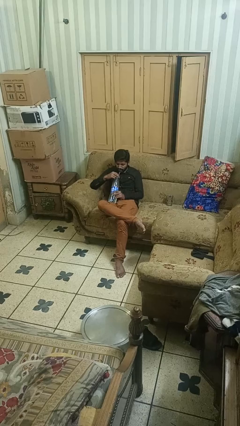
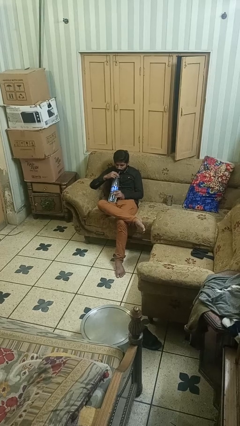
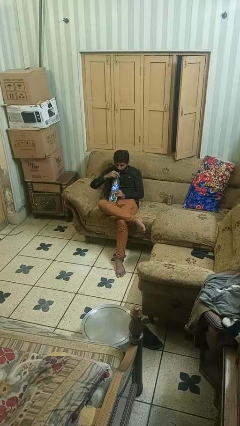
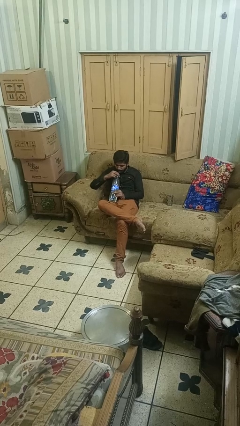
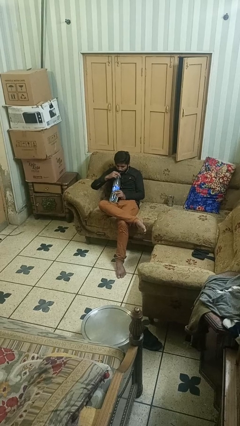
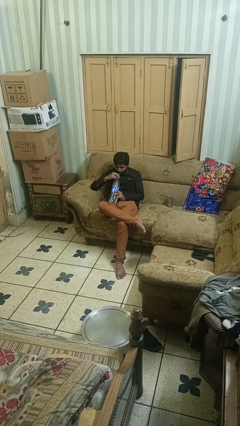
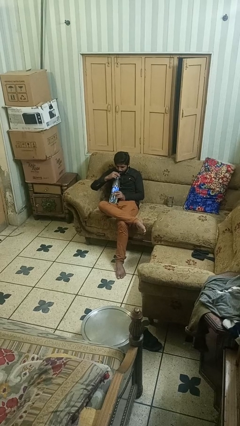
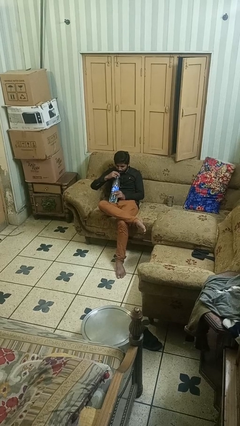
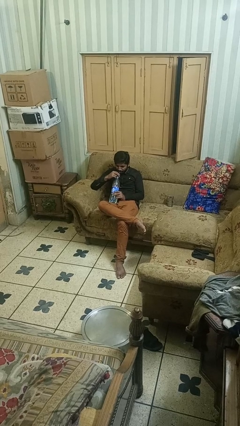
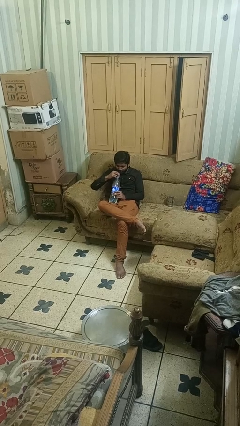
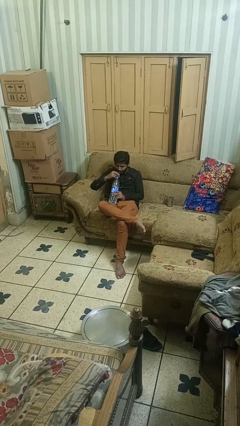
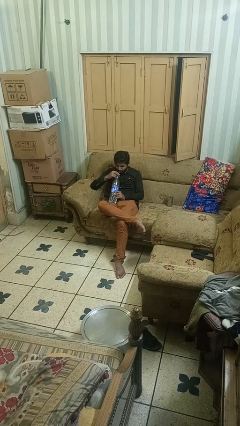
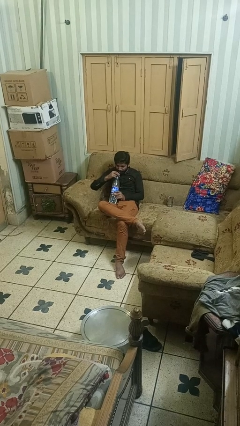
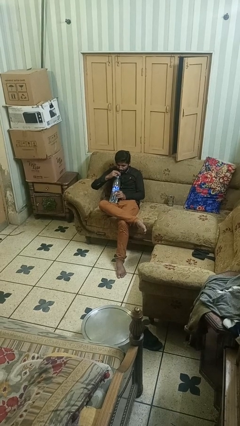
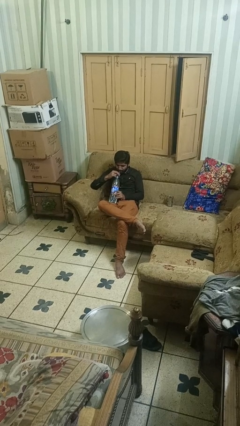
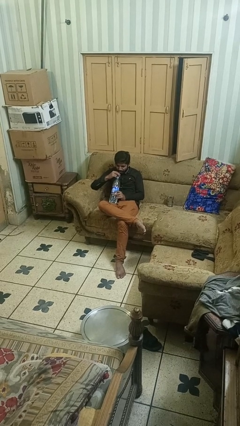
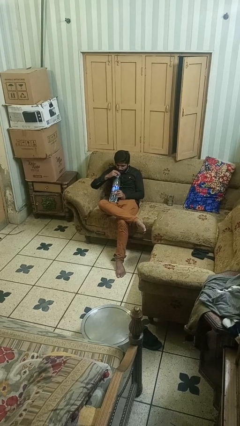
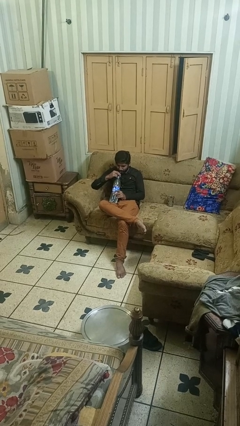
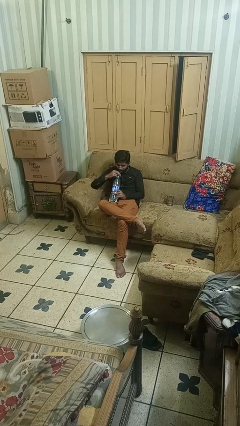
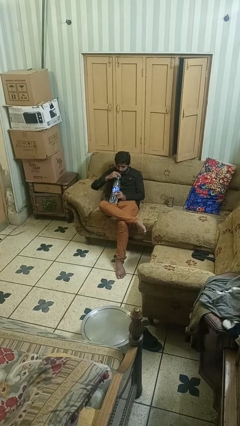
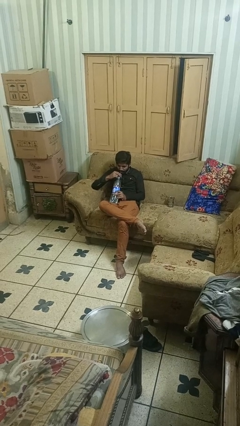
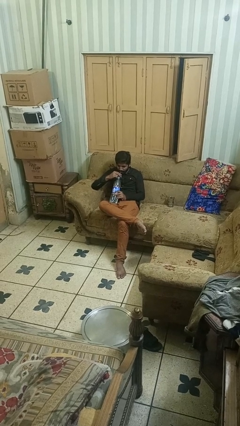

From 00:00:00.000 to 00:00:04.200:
person drinks from straw

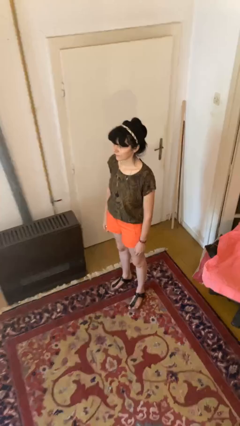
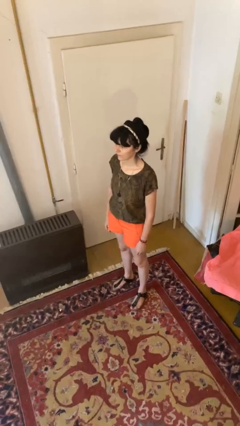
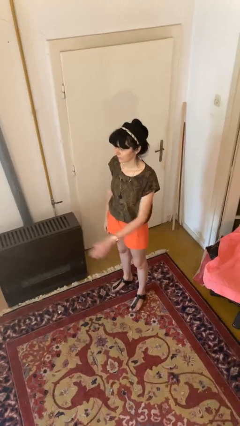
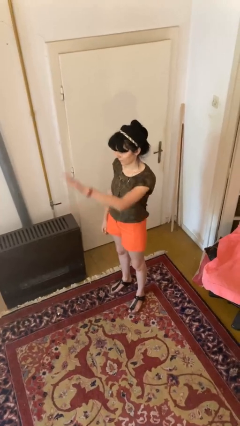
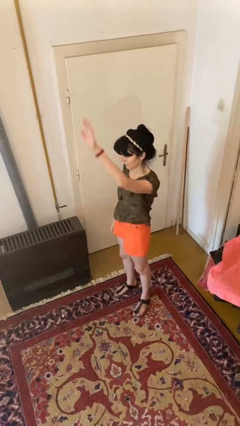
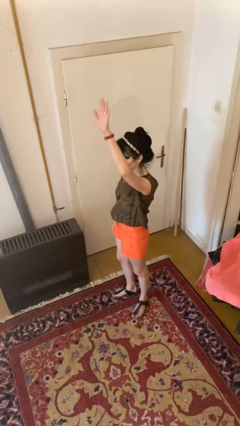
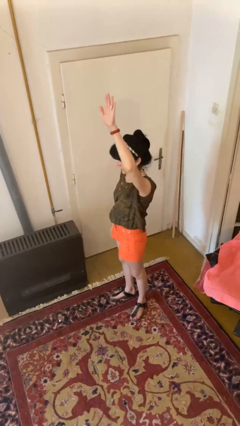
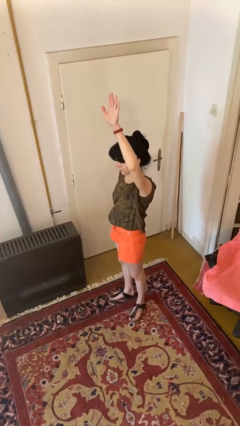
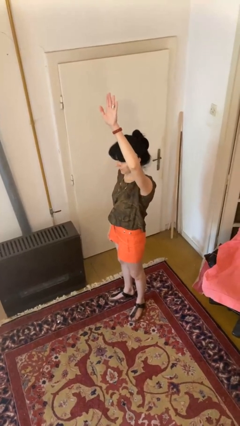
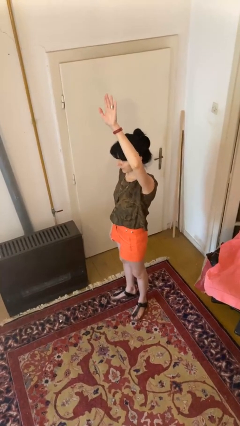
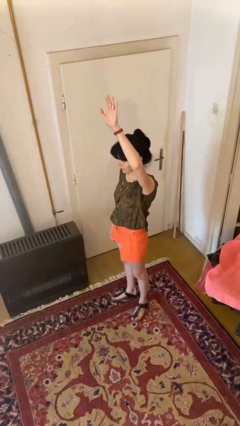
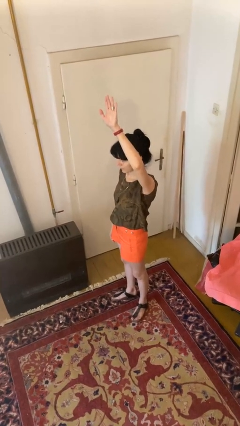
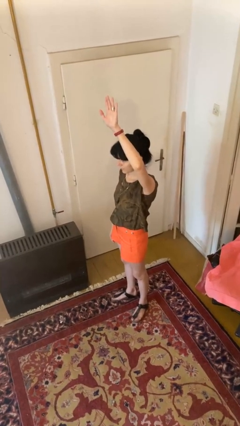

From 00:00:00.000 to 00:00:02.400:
person gestures raise hand

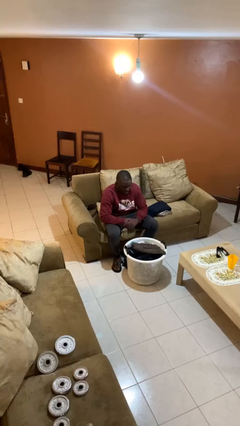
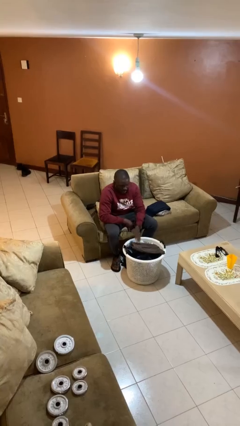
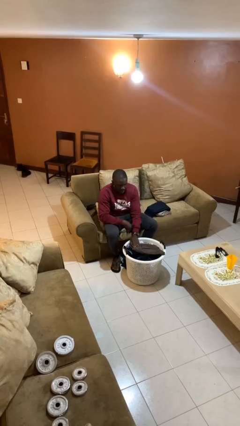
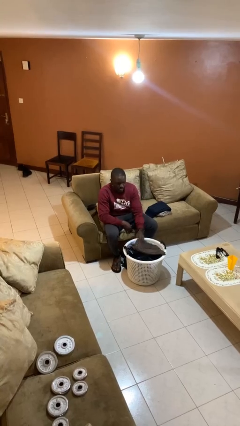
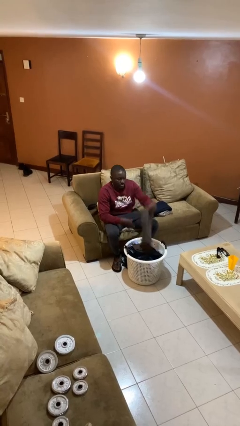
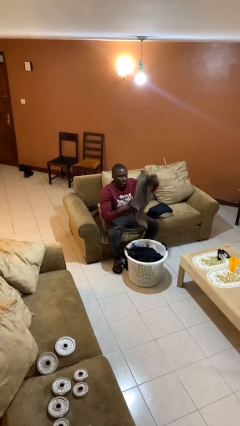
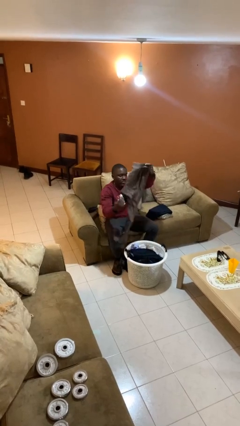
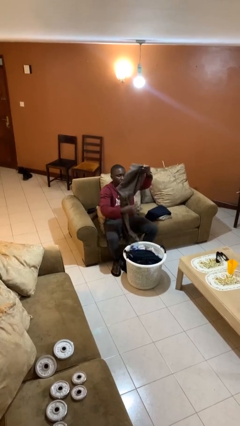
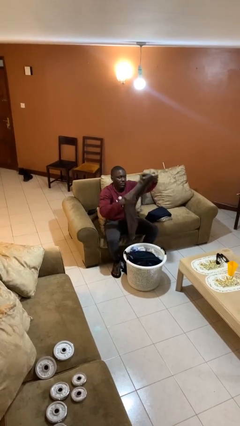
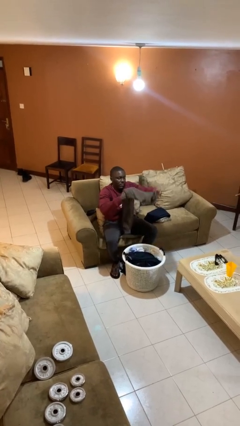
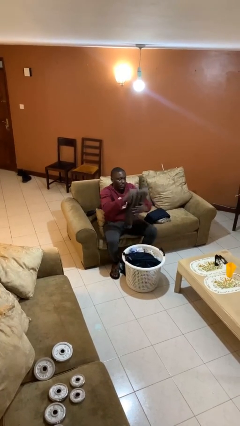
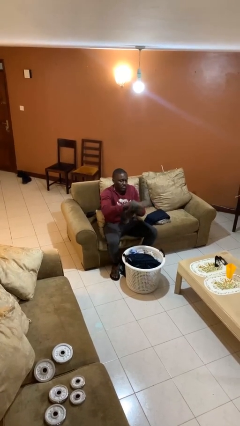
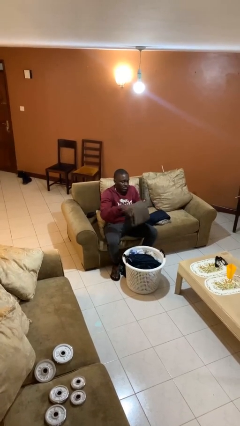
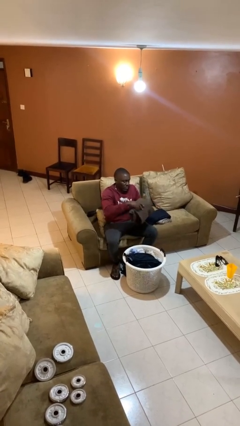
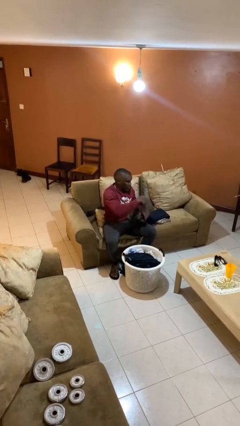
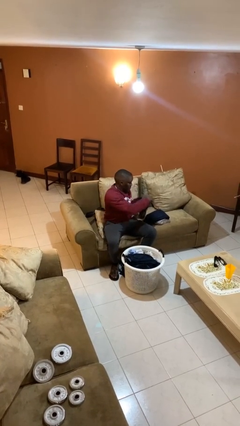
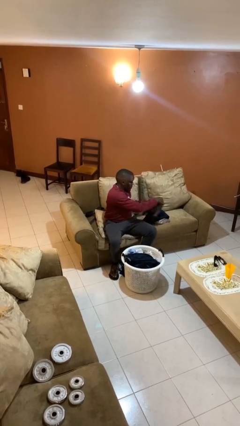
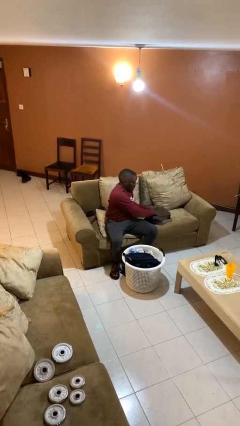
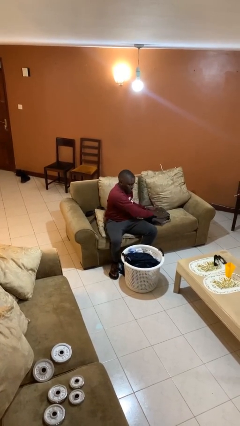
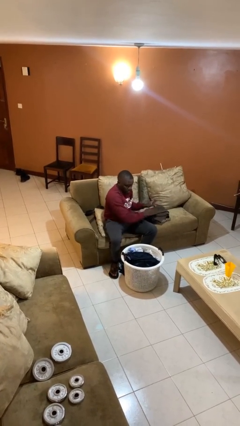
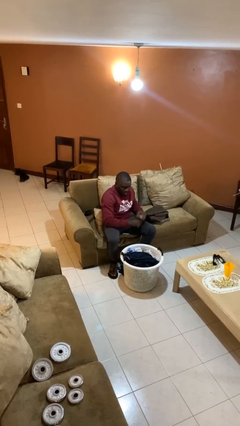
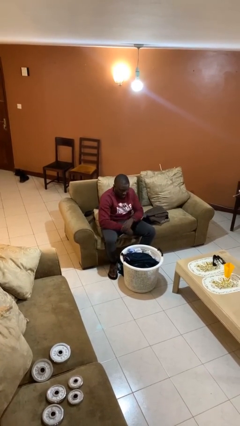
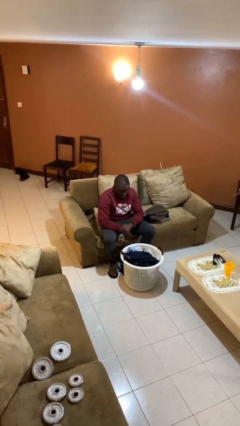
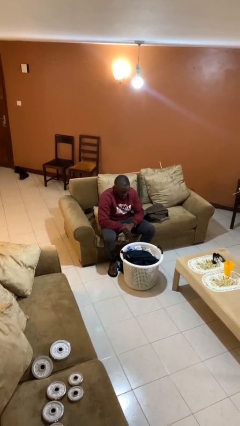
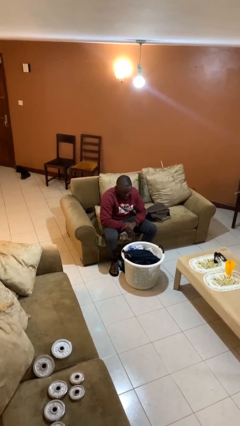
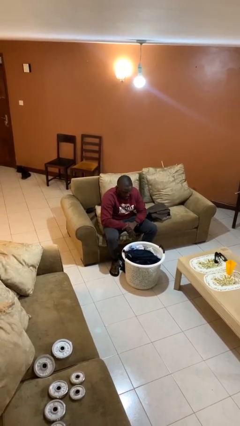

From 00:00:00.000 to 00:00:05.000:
person folds pants

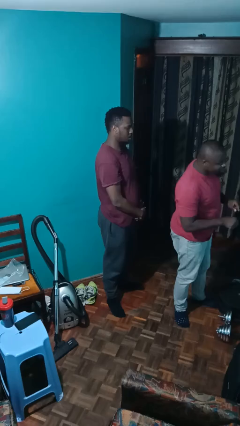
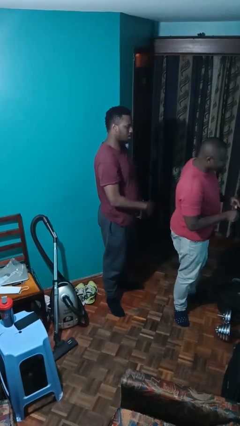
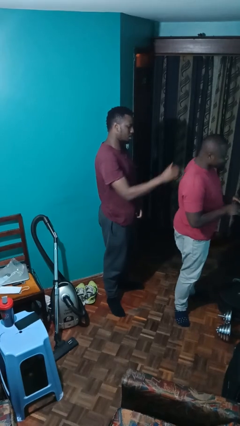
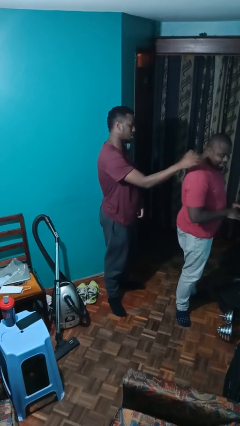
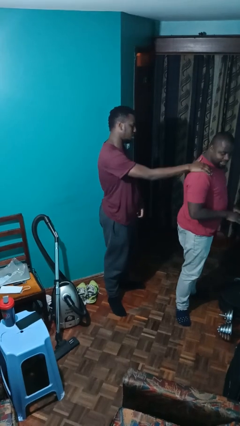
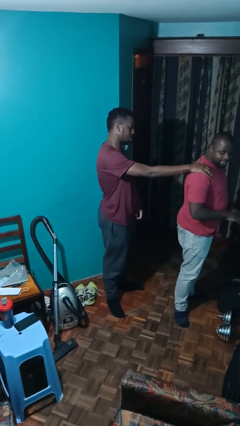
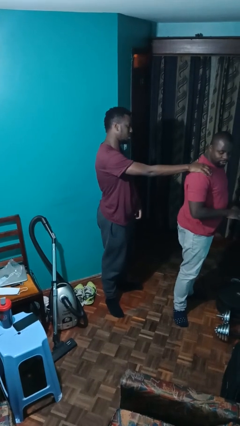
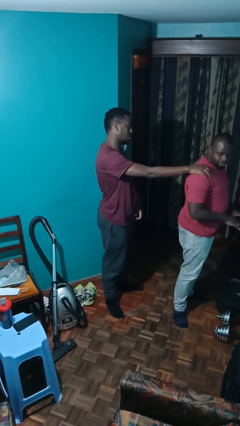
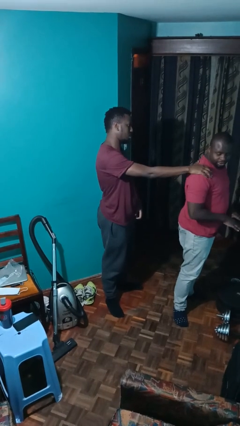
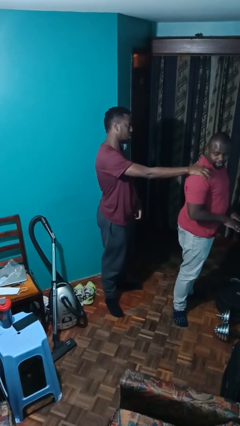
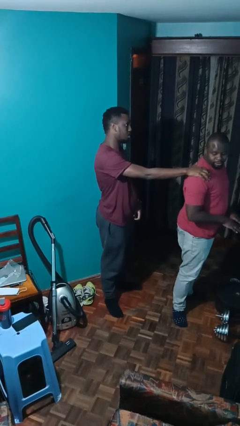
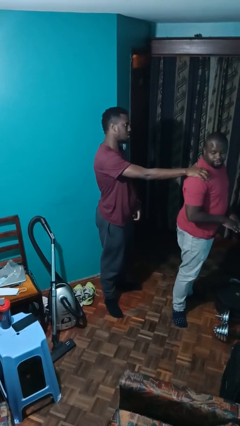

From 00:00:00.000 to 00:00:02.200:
person grabs person by shoulder

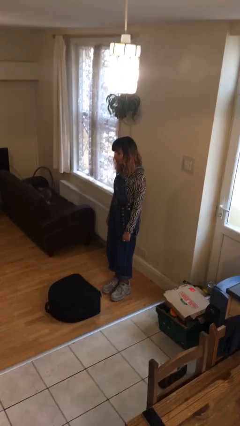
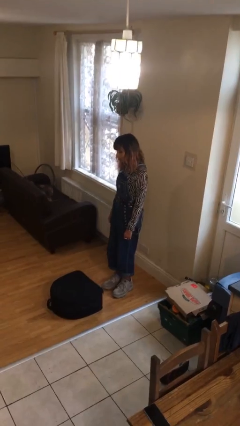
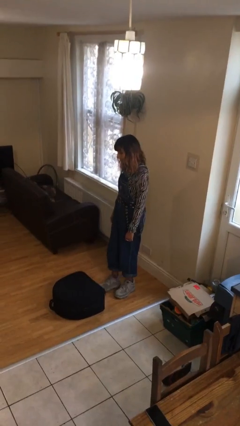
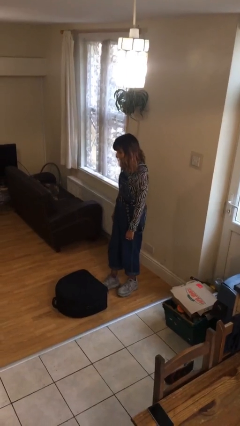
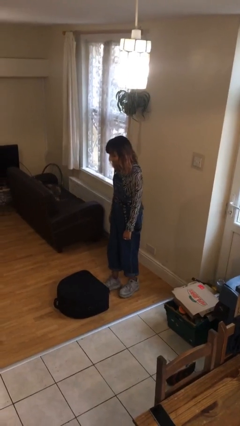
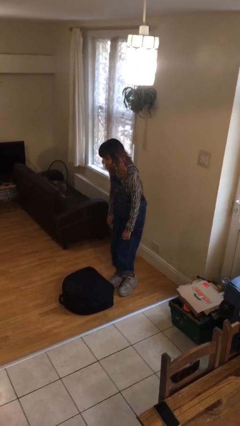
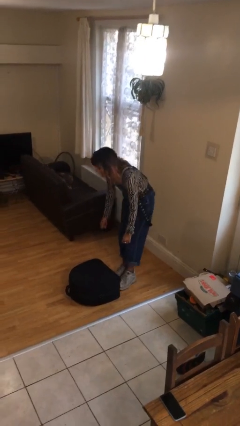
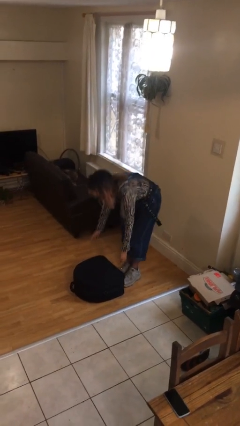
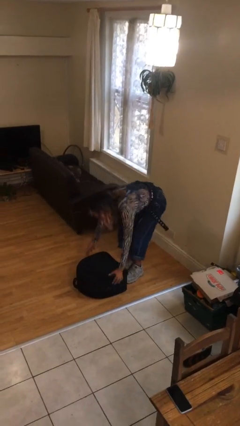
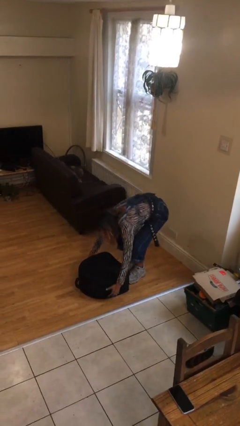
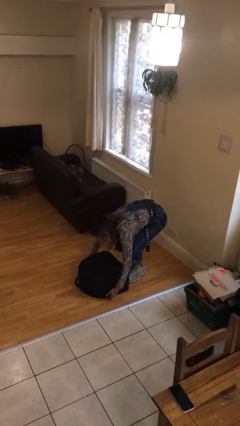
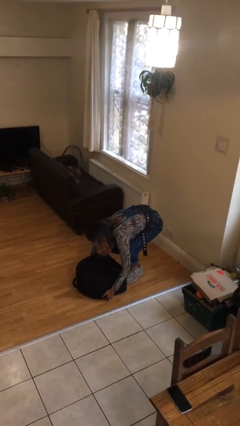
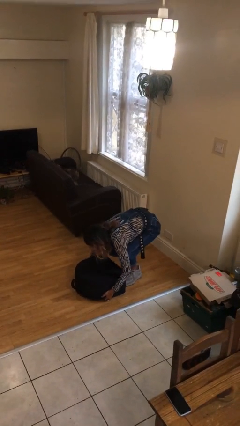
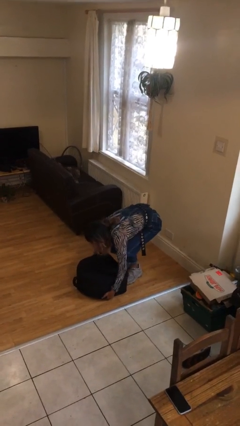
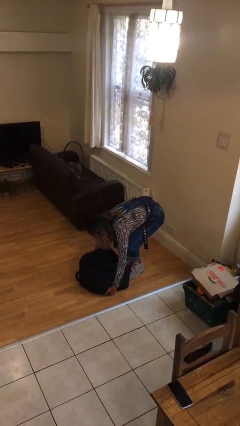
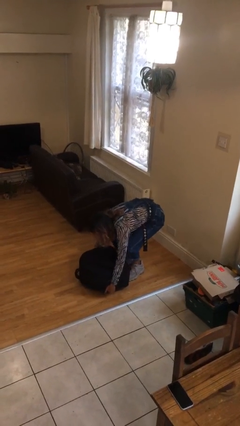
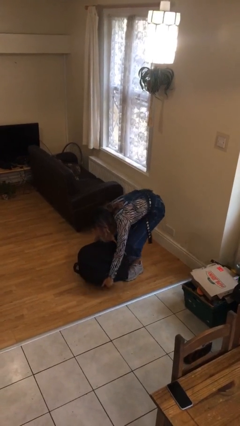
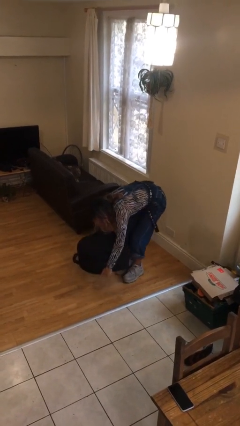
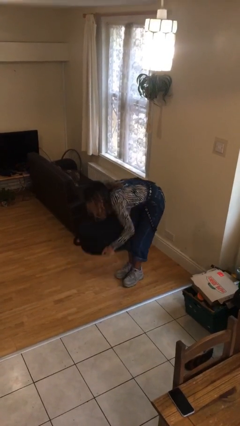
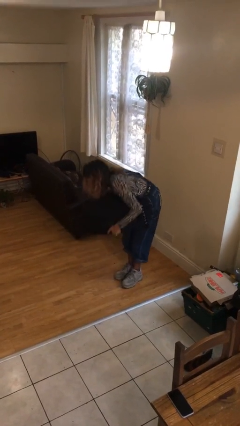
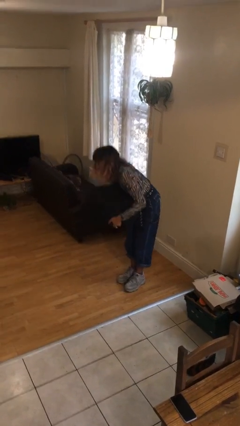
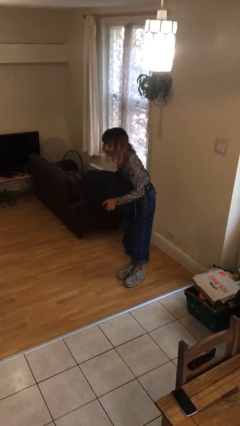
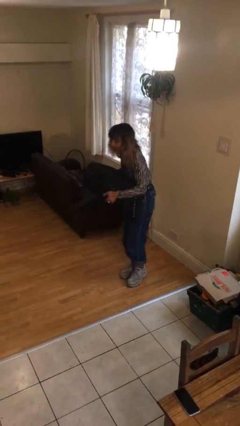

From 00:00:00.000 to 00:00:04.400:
person picks up object from floor
